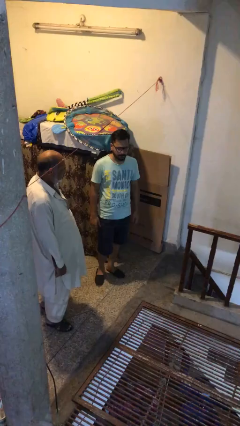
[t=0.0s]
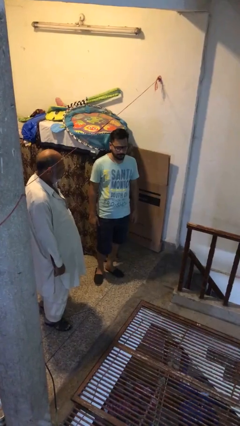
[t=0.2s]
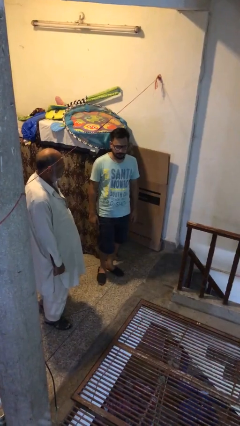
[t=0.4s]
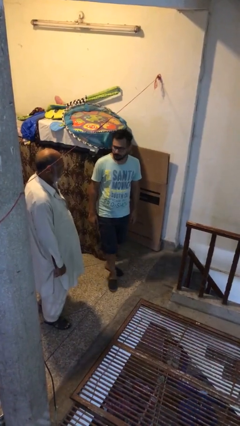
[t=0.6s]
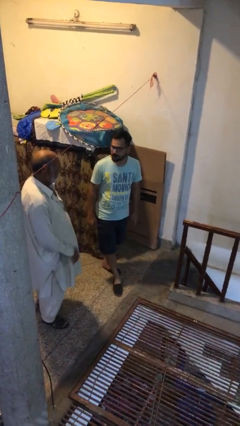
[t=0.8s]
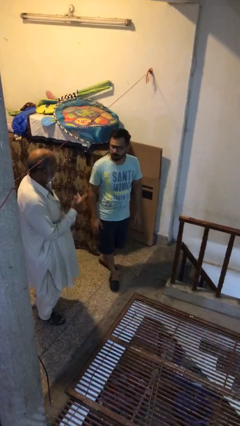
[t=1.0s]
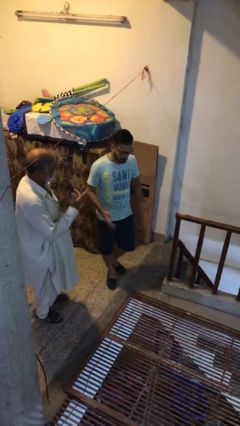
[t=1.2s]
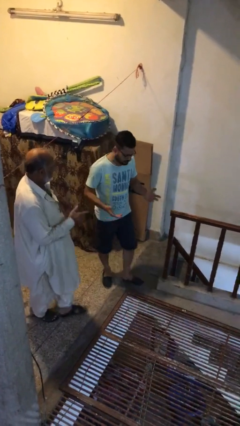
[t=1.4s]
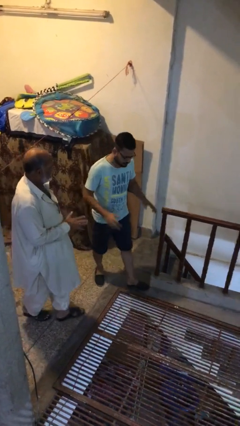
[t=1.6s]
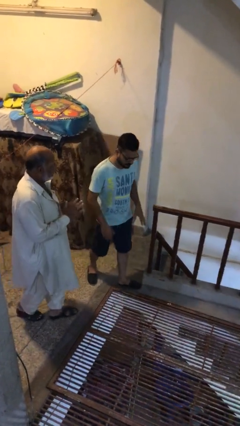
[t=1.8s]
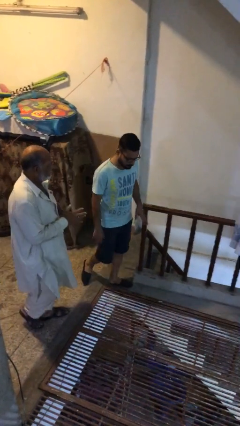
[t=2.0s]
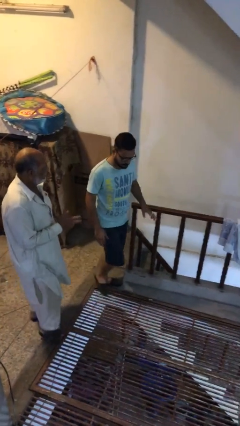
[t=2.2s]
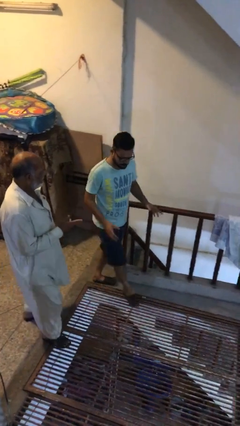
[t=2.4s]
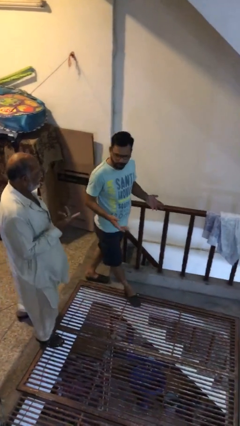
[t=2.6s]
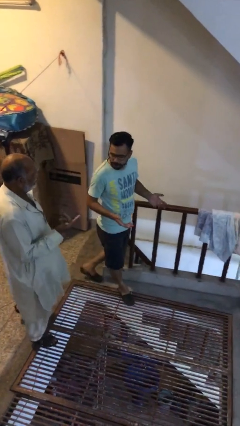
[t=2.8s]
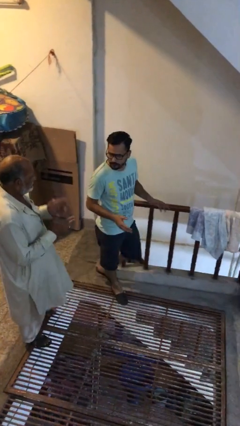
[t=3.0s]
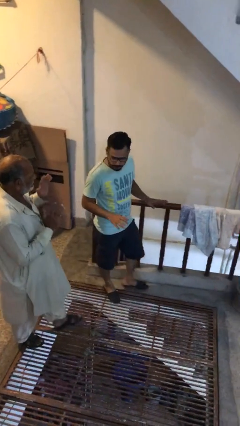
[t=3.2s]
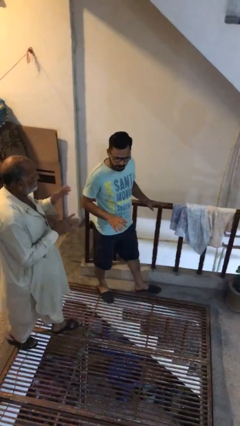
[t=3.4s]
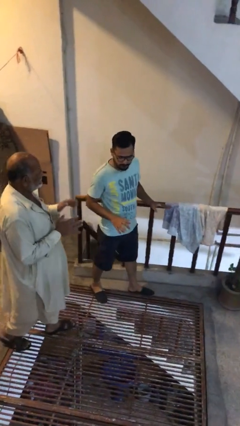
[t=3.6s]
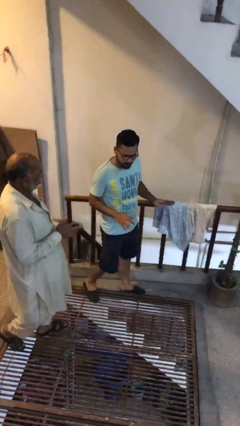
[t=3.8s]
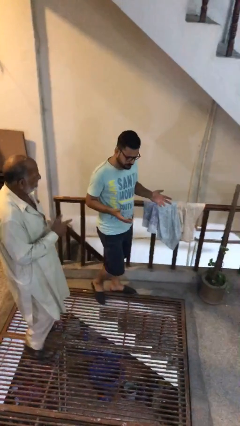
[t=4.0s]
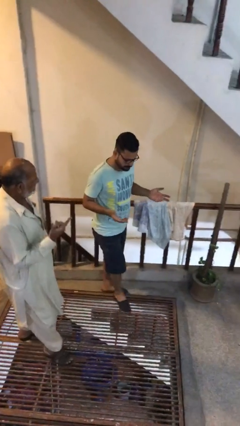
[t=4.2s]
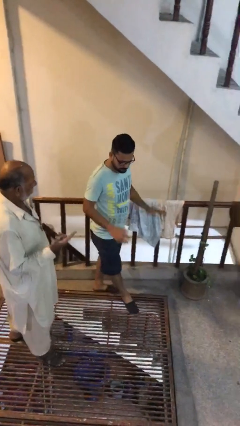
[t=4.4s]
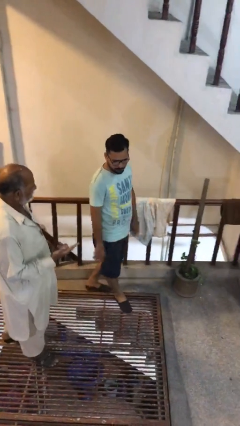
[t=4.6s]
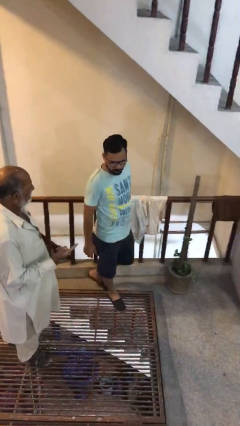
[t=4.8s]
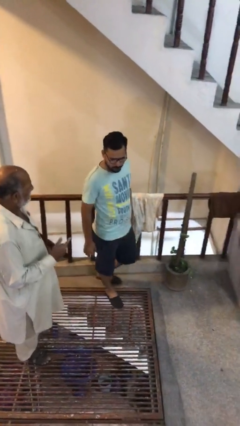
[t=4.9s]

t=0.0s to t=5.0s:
person talks to person

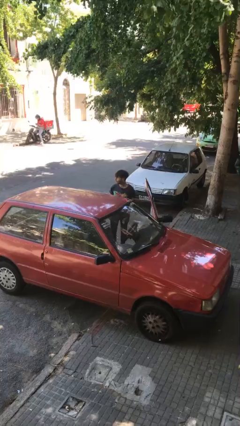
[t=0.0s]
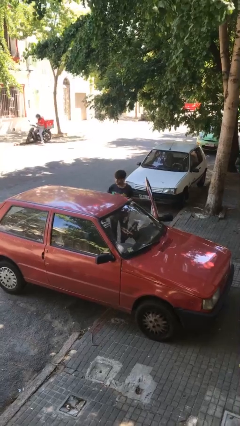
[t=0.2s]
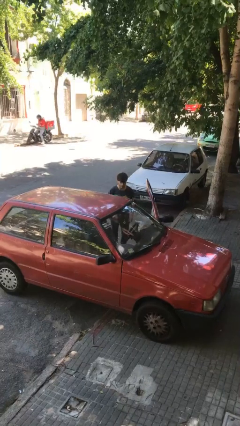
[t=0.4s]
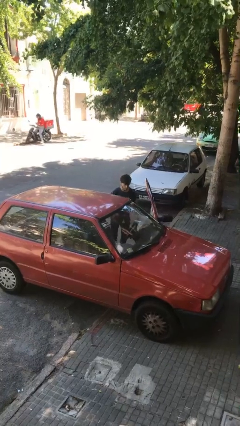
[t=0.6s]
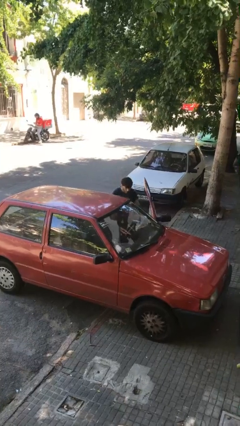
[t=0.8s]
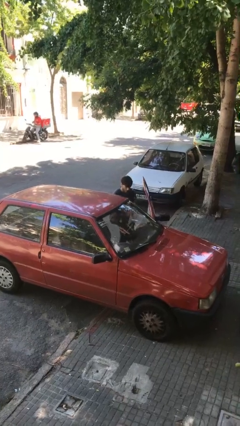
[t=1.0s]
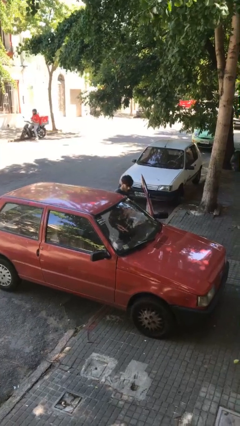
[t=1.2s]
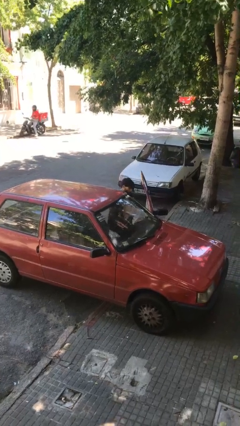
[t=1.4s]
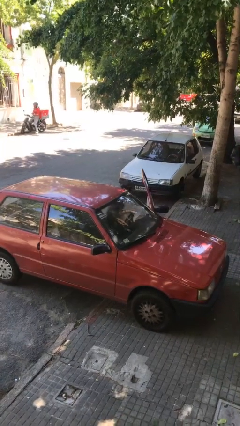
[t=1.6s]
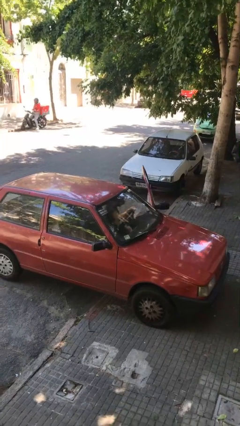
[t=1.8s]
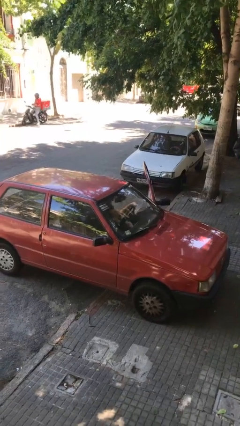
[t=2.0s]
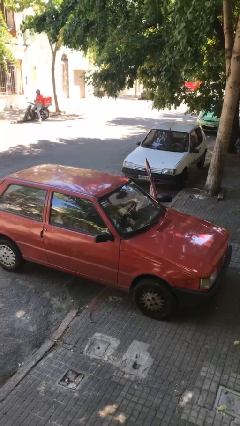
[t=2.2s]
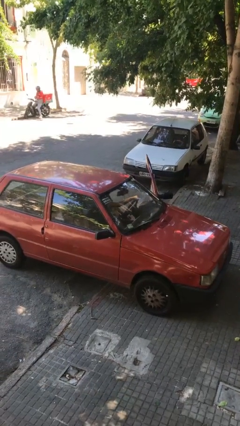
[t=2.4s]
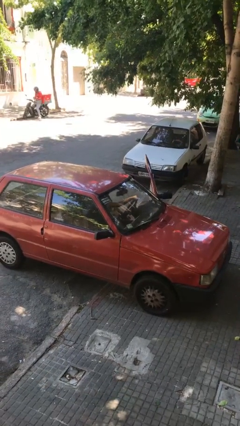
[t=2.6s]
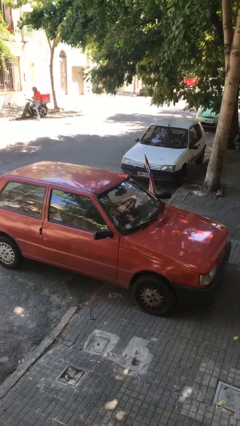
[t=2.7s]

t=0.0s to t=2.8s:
person enters car

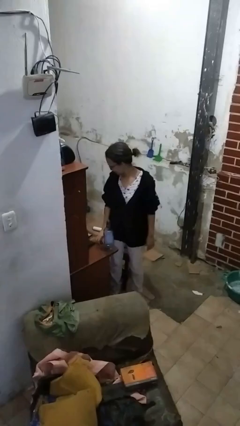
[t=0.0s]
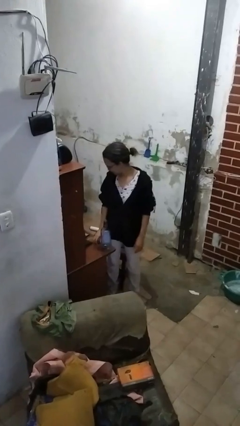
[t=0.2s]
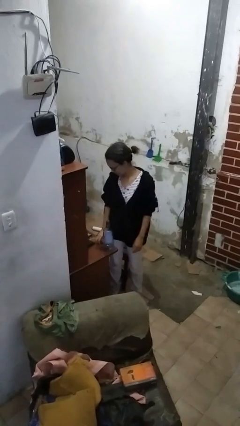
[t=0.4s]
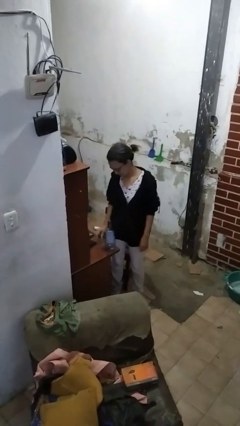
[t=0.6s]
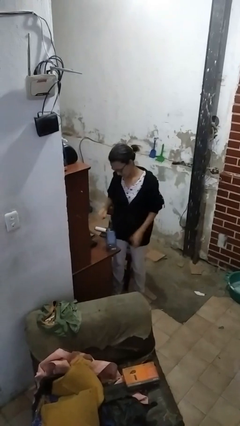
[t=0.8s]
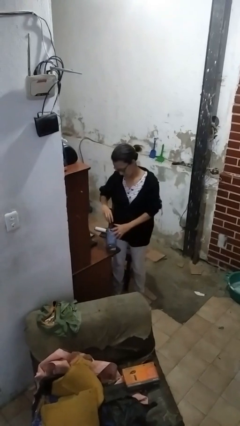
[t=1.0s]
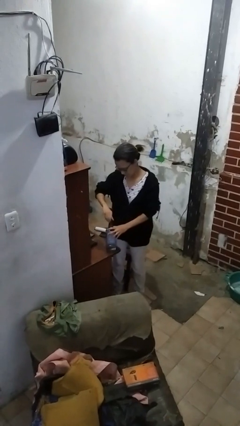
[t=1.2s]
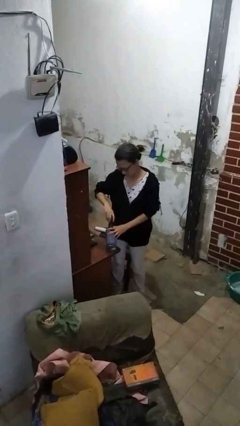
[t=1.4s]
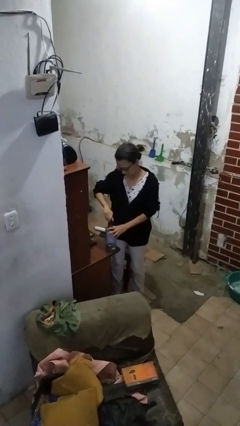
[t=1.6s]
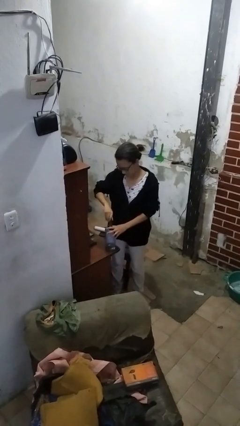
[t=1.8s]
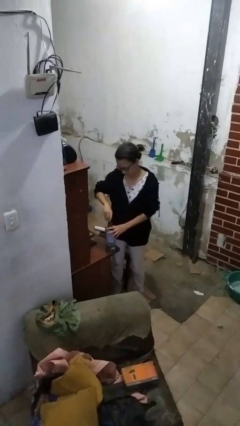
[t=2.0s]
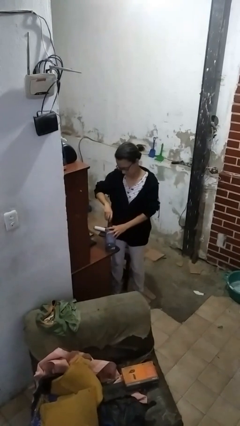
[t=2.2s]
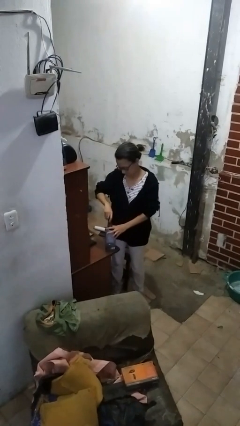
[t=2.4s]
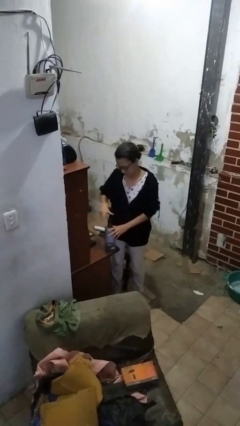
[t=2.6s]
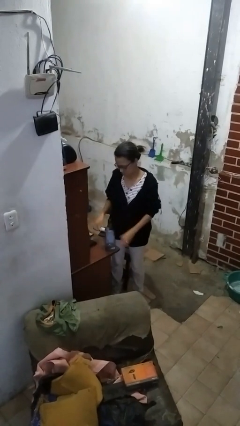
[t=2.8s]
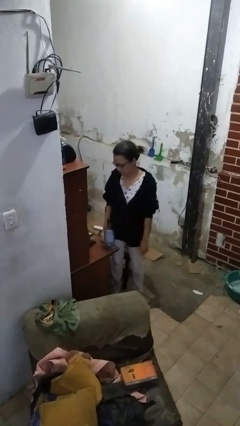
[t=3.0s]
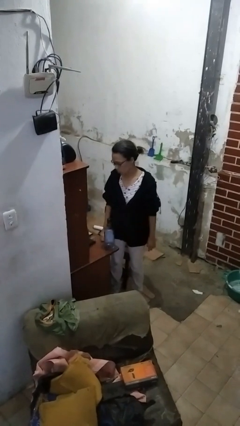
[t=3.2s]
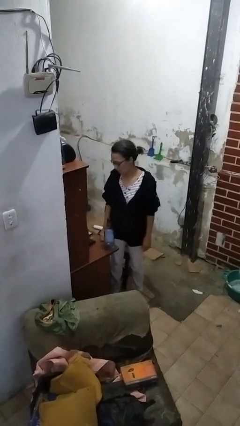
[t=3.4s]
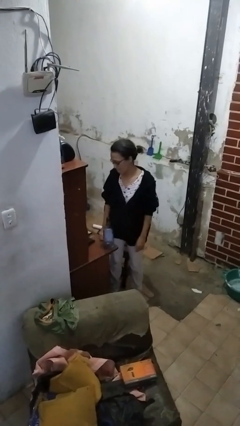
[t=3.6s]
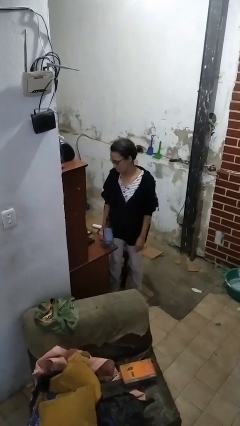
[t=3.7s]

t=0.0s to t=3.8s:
person screws lid to bottle

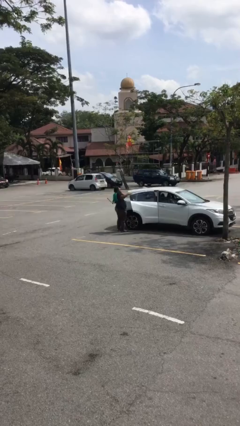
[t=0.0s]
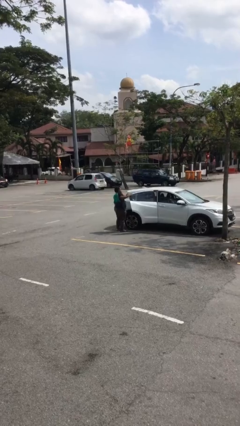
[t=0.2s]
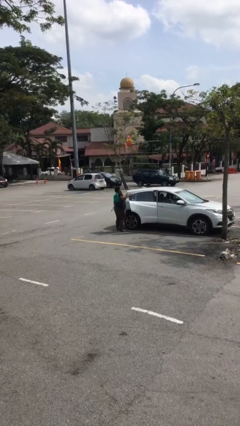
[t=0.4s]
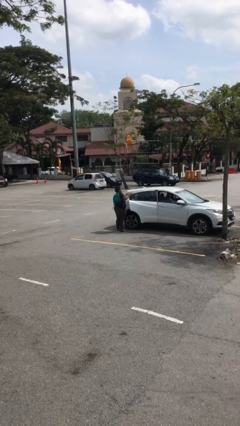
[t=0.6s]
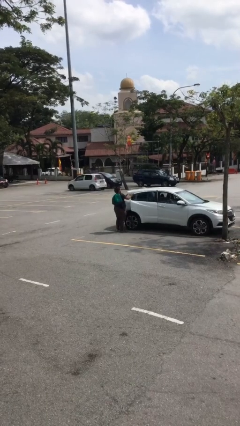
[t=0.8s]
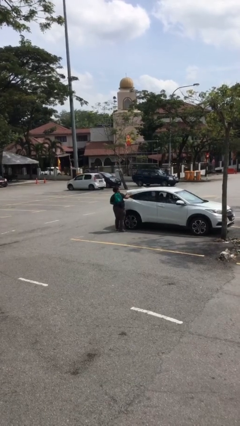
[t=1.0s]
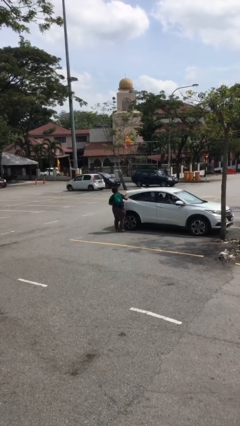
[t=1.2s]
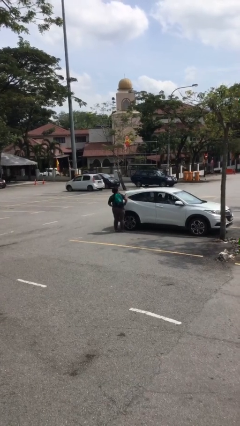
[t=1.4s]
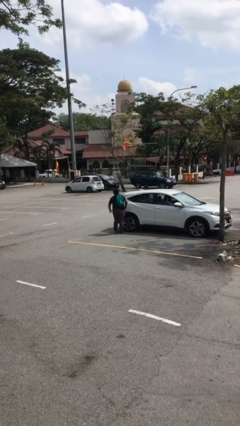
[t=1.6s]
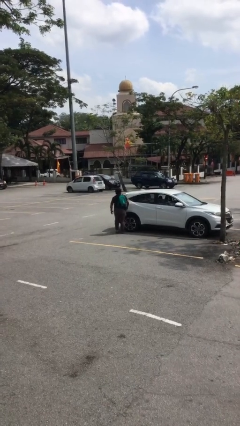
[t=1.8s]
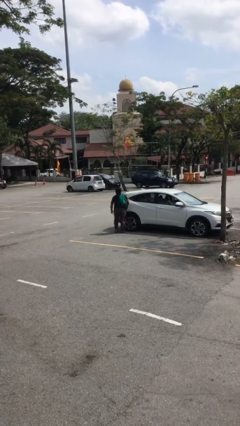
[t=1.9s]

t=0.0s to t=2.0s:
person closes car door

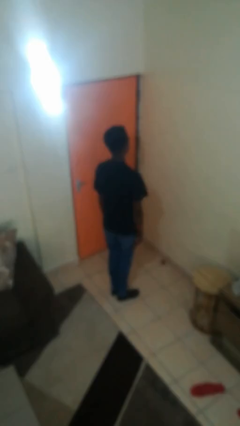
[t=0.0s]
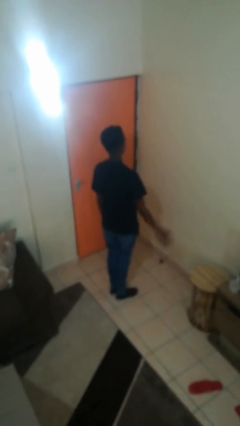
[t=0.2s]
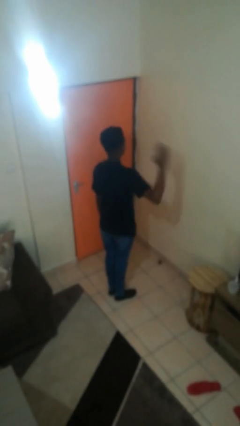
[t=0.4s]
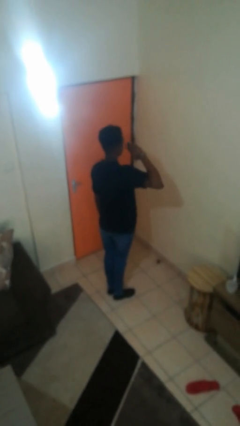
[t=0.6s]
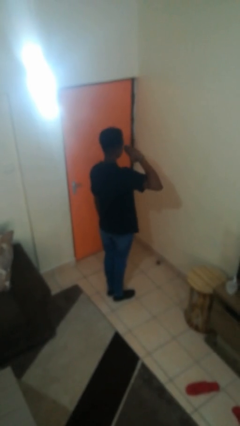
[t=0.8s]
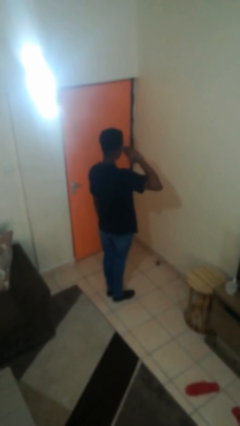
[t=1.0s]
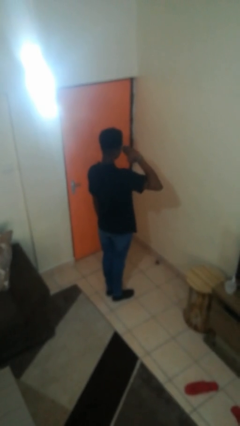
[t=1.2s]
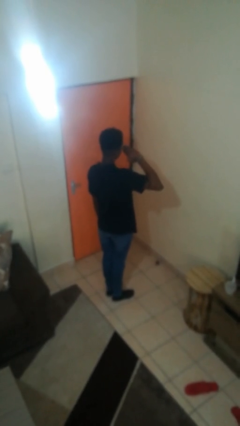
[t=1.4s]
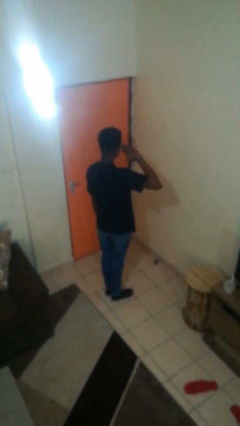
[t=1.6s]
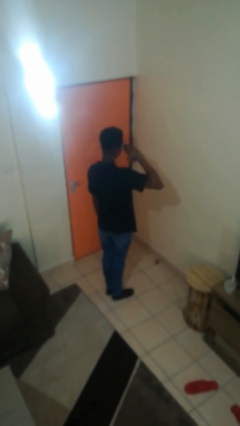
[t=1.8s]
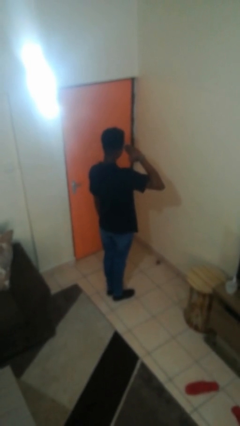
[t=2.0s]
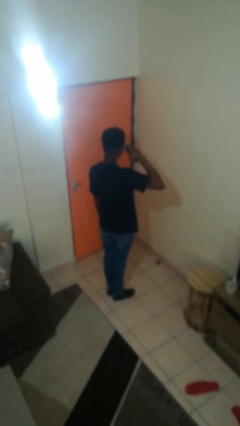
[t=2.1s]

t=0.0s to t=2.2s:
person salutes

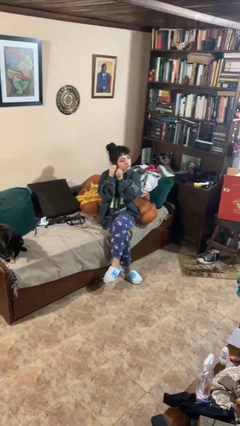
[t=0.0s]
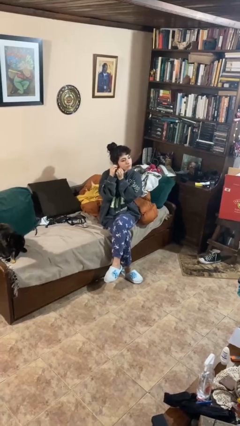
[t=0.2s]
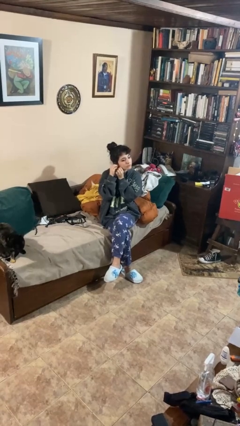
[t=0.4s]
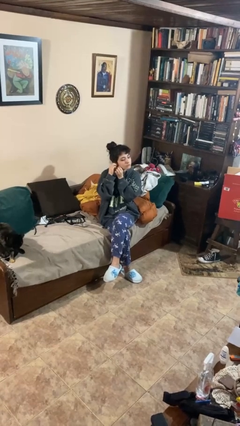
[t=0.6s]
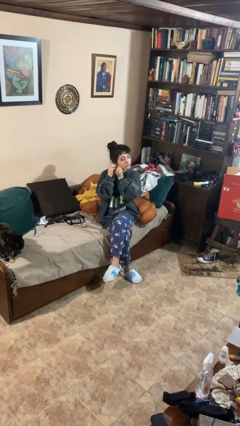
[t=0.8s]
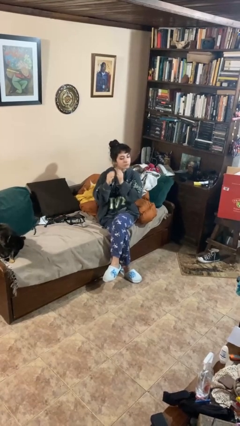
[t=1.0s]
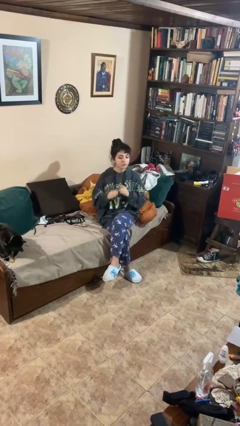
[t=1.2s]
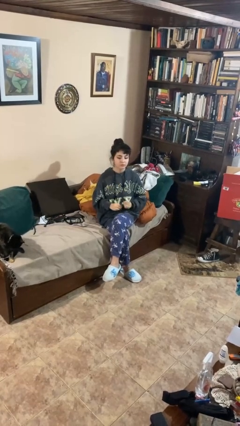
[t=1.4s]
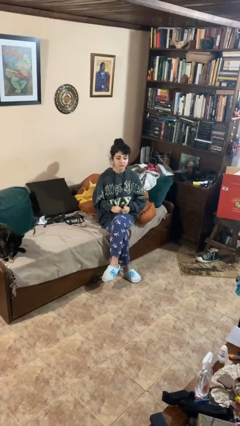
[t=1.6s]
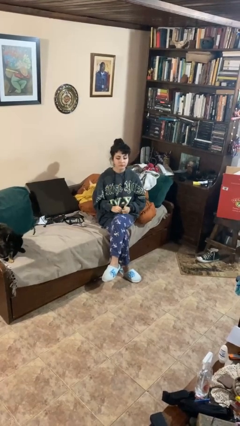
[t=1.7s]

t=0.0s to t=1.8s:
person takes off earrings
